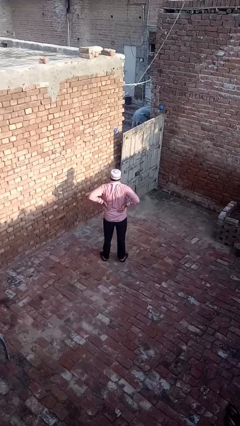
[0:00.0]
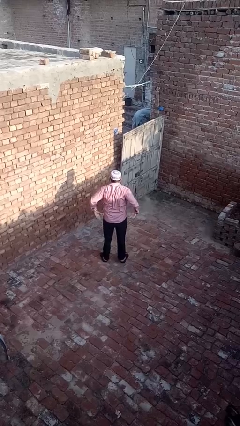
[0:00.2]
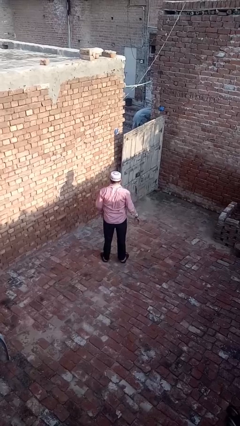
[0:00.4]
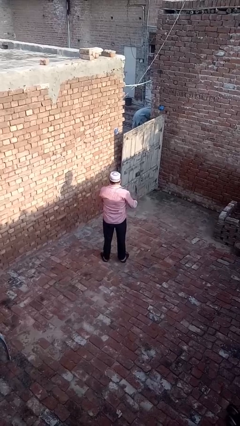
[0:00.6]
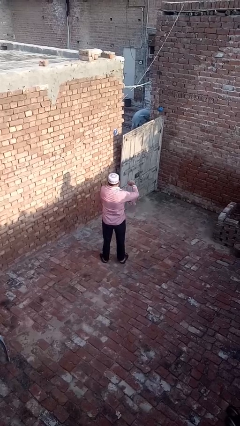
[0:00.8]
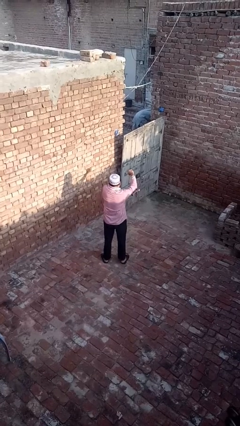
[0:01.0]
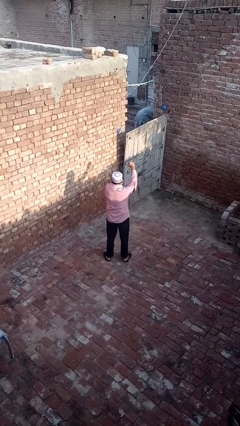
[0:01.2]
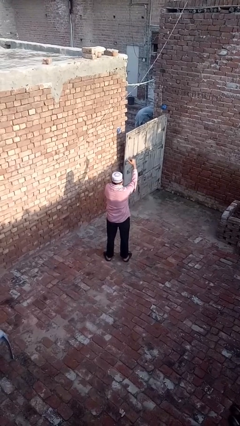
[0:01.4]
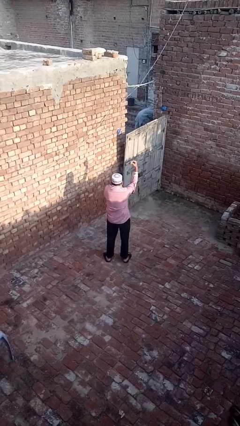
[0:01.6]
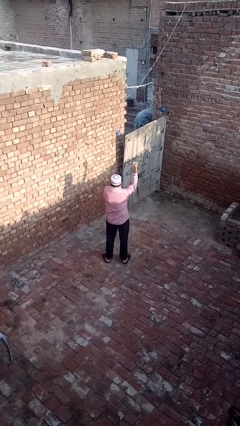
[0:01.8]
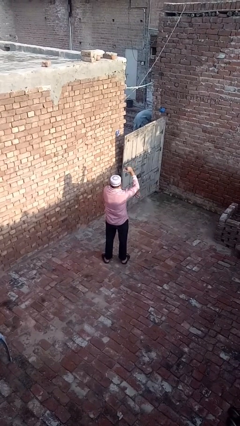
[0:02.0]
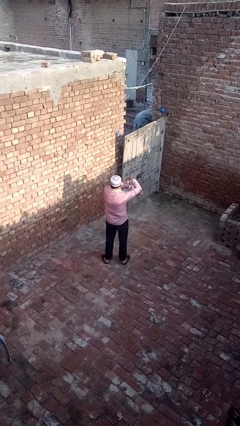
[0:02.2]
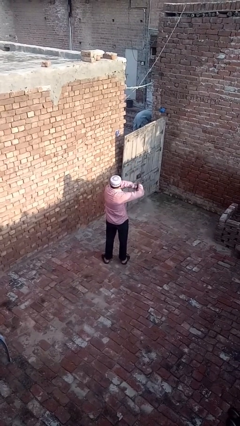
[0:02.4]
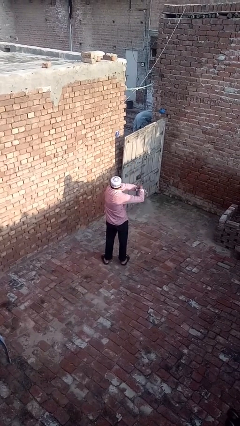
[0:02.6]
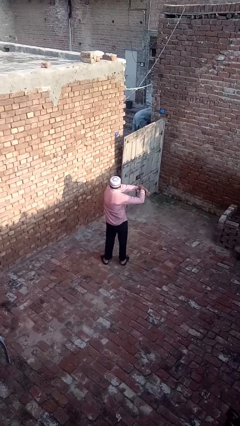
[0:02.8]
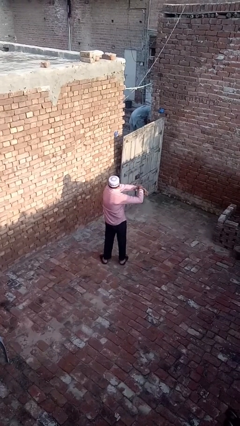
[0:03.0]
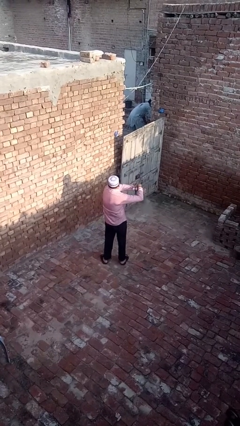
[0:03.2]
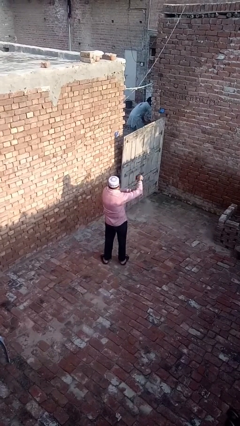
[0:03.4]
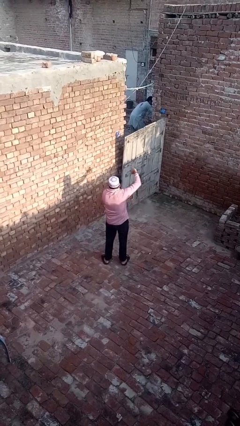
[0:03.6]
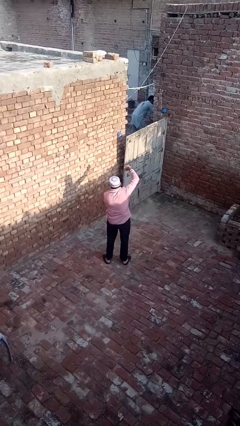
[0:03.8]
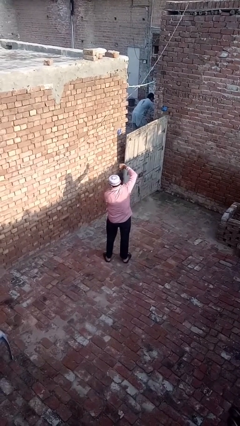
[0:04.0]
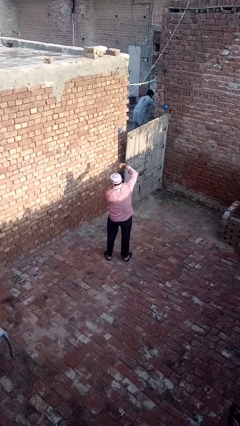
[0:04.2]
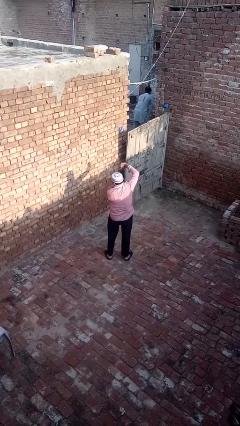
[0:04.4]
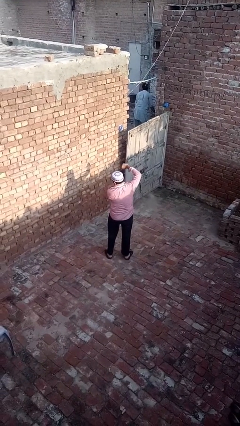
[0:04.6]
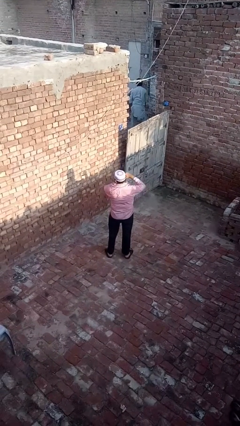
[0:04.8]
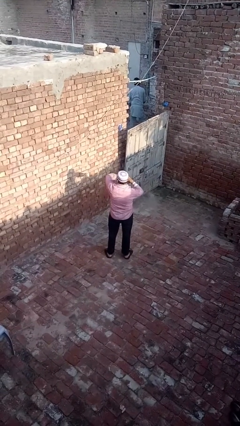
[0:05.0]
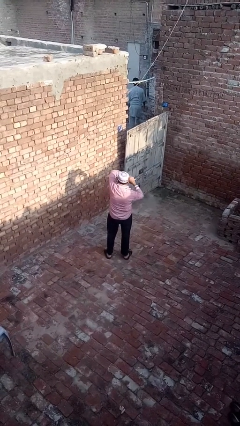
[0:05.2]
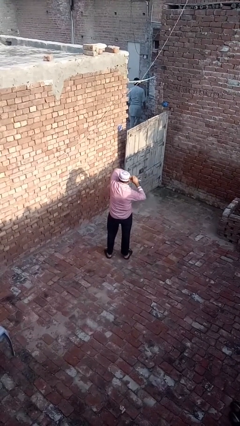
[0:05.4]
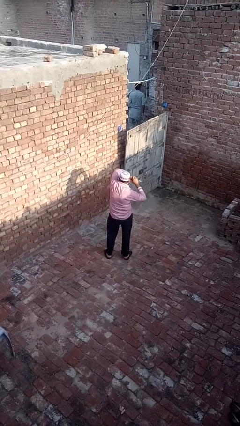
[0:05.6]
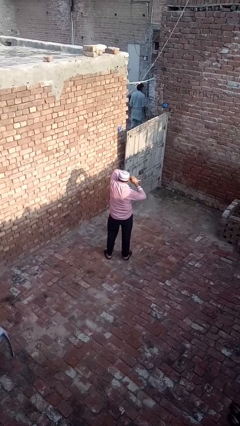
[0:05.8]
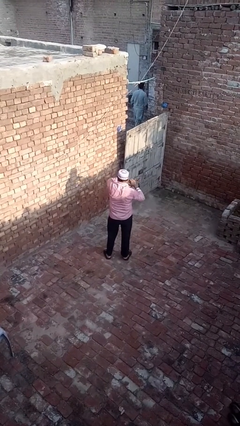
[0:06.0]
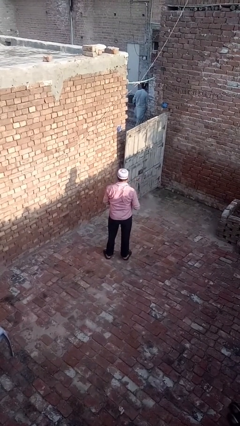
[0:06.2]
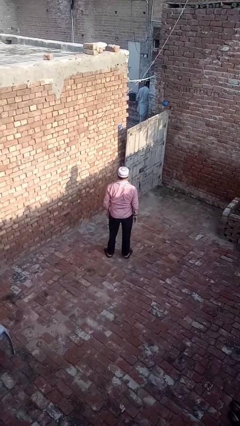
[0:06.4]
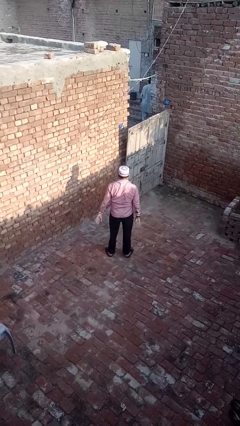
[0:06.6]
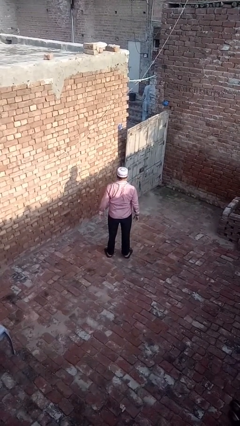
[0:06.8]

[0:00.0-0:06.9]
person stretches arms to side

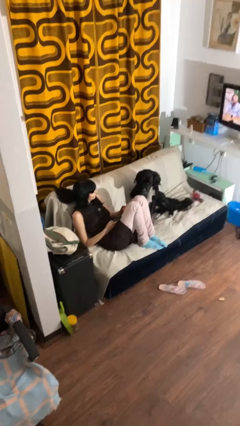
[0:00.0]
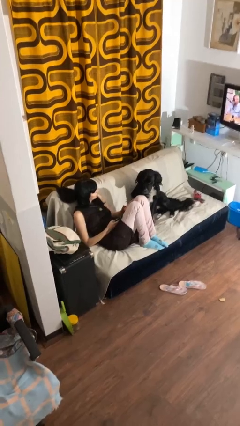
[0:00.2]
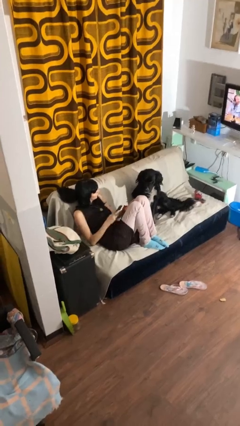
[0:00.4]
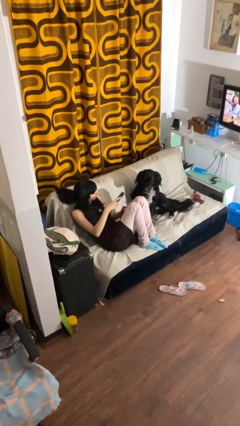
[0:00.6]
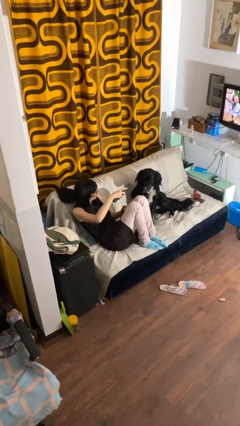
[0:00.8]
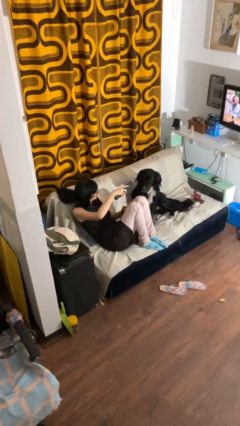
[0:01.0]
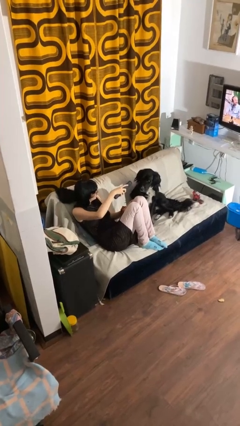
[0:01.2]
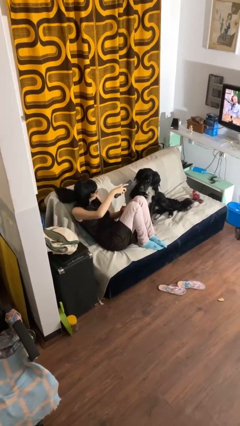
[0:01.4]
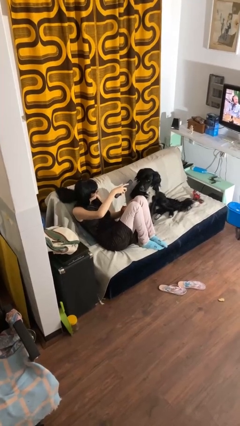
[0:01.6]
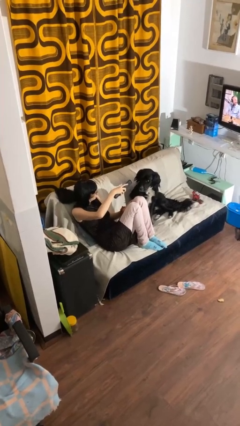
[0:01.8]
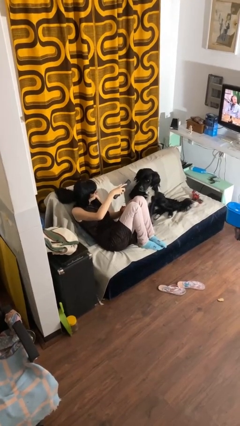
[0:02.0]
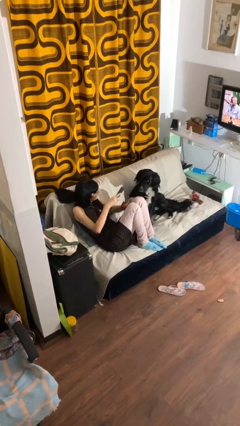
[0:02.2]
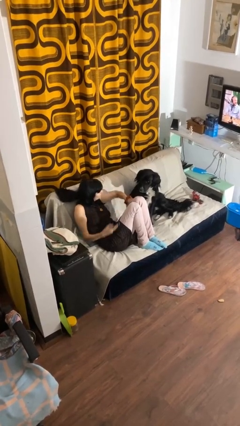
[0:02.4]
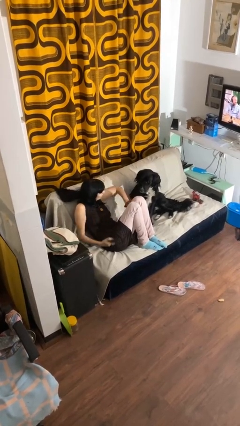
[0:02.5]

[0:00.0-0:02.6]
person uses television remote

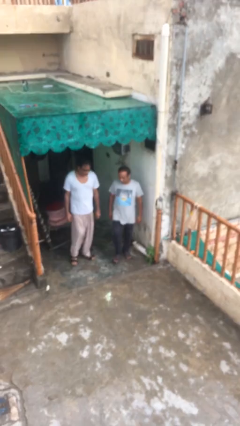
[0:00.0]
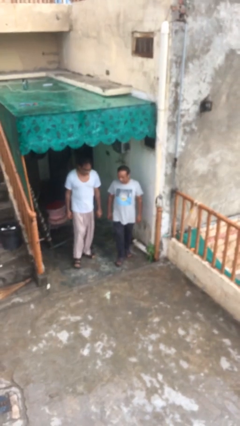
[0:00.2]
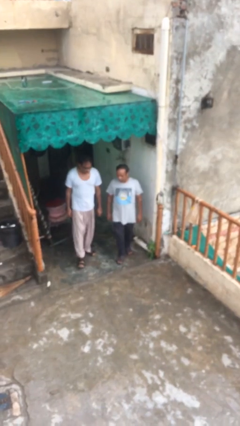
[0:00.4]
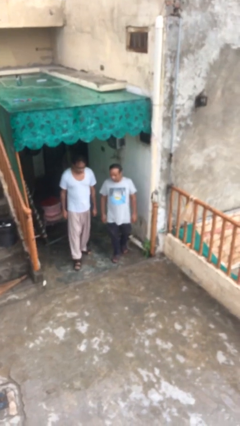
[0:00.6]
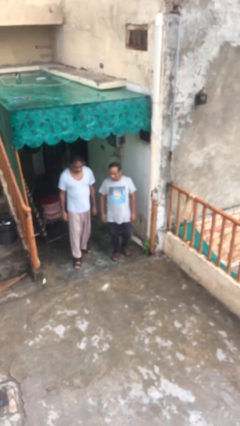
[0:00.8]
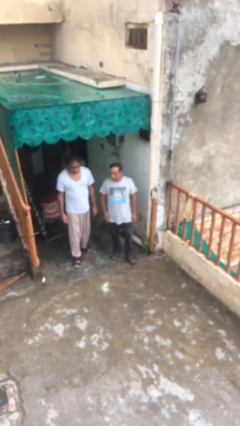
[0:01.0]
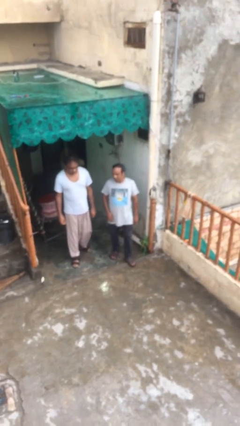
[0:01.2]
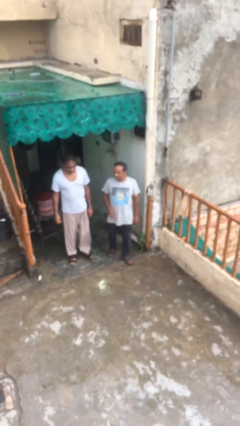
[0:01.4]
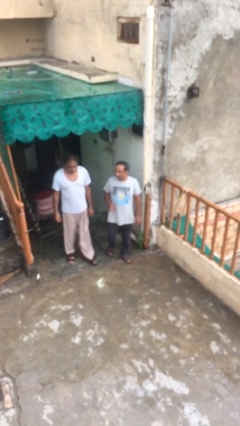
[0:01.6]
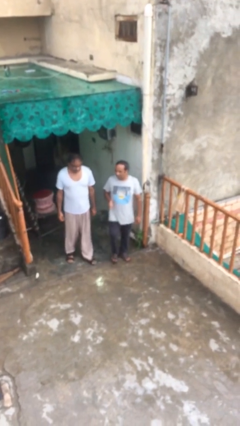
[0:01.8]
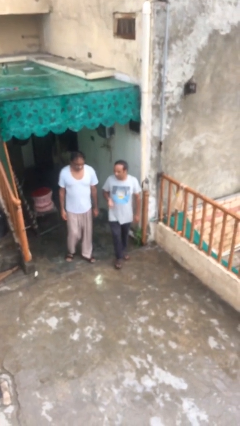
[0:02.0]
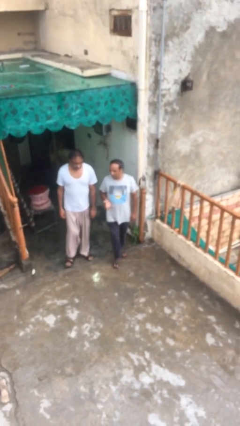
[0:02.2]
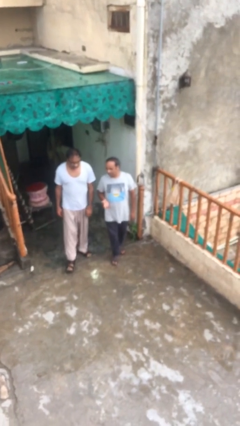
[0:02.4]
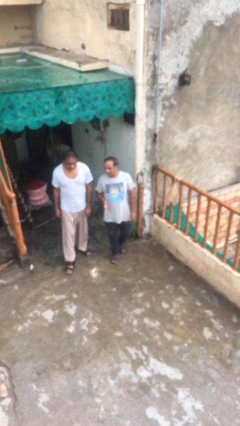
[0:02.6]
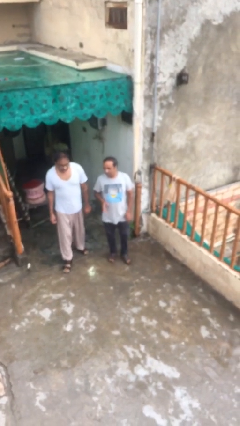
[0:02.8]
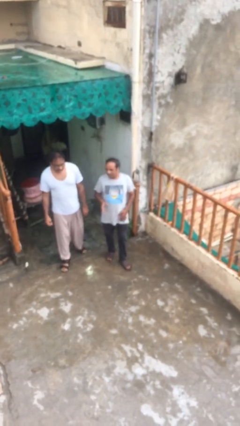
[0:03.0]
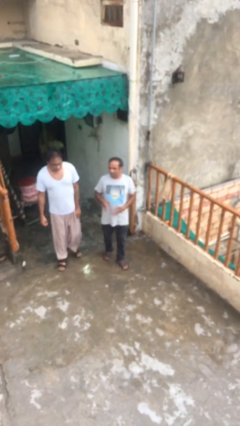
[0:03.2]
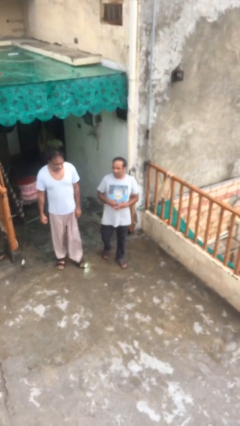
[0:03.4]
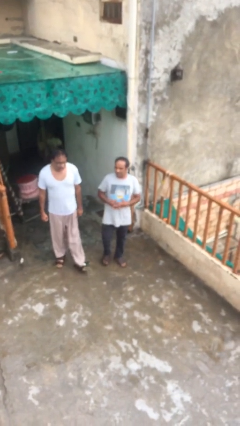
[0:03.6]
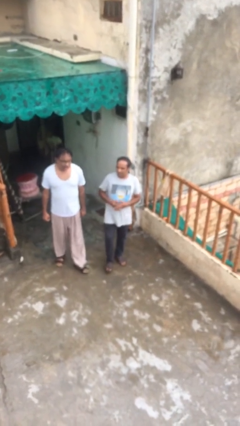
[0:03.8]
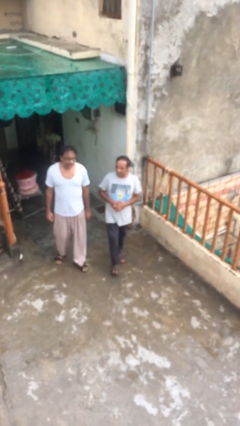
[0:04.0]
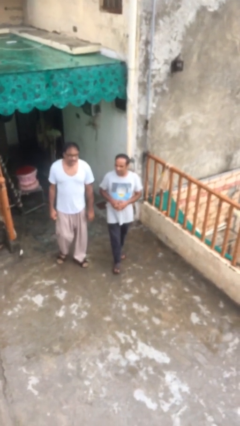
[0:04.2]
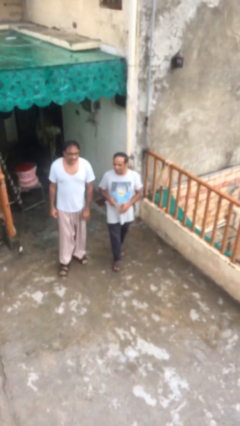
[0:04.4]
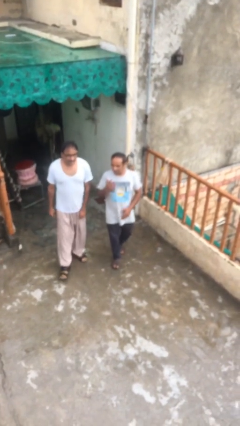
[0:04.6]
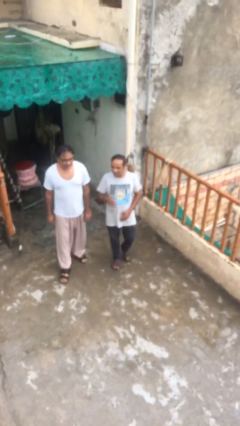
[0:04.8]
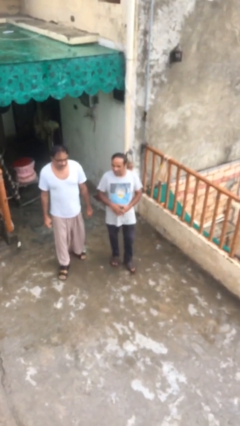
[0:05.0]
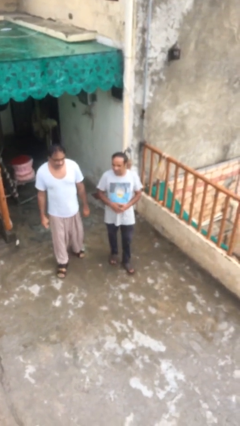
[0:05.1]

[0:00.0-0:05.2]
person talks to person

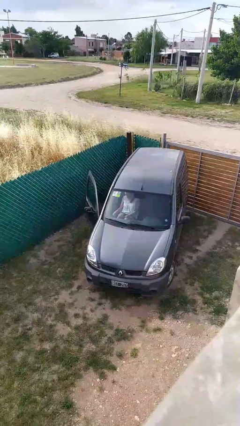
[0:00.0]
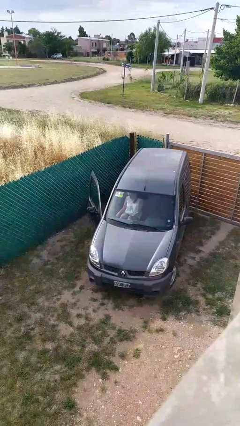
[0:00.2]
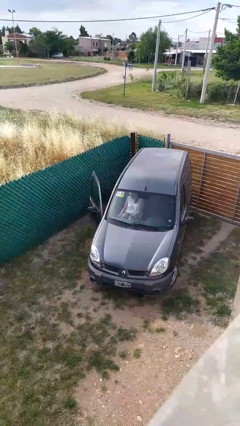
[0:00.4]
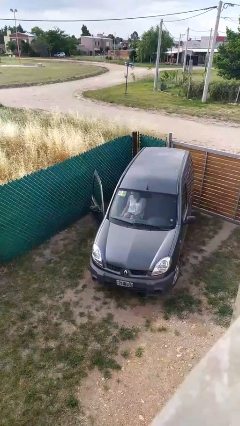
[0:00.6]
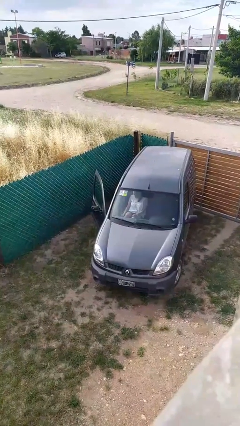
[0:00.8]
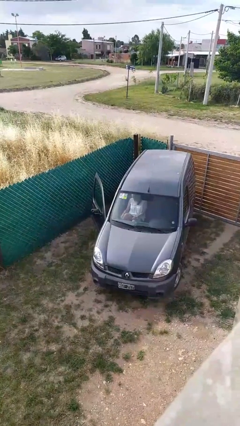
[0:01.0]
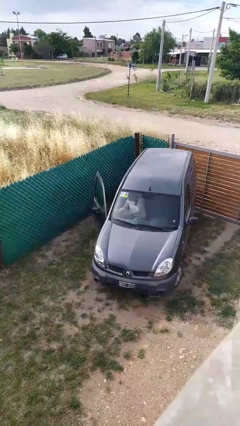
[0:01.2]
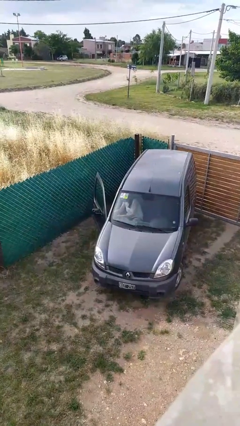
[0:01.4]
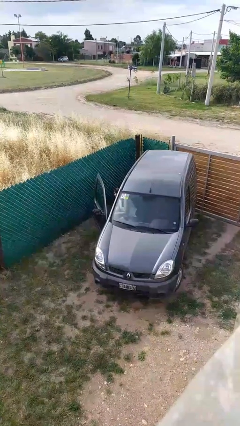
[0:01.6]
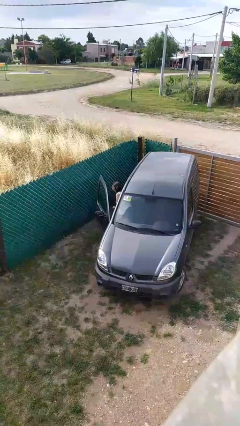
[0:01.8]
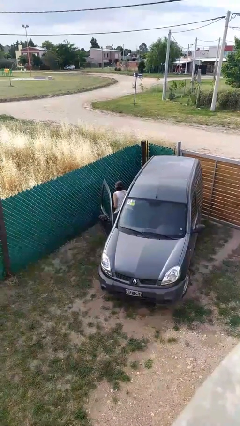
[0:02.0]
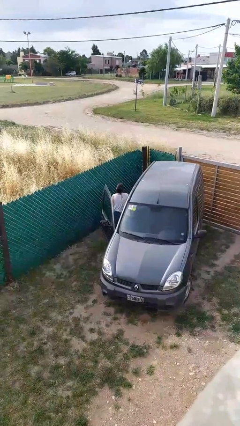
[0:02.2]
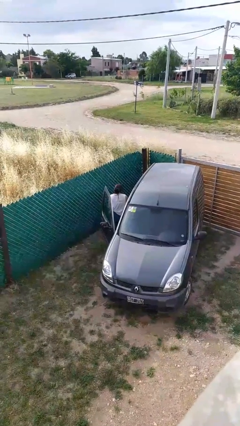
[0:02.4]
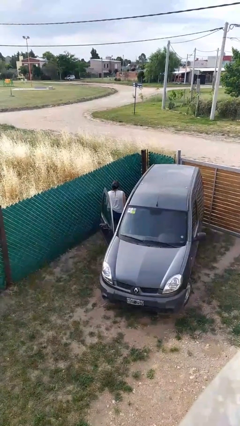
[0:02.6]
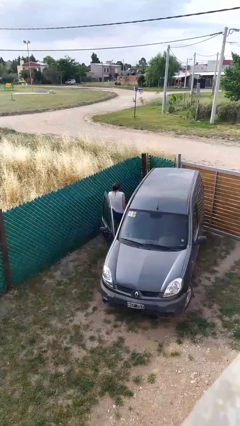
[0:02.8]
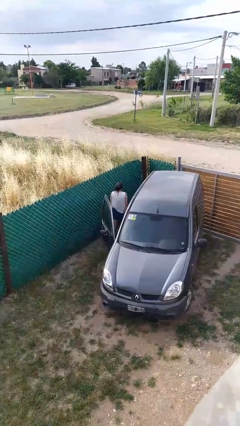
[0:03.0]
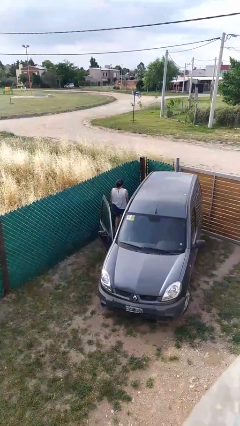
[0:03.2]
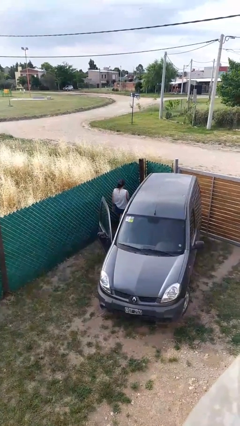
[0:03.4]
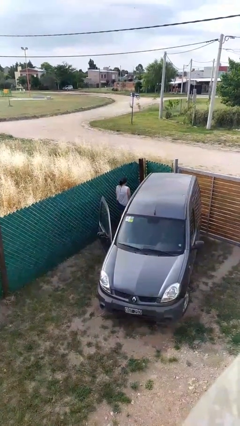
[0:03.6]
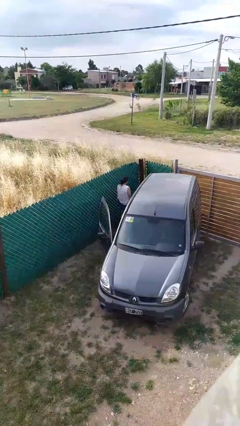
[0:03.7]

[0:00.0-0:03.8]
person exits car
